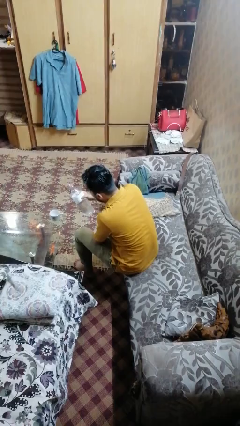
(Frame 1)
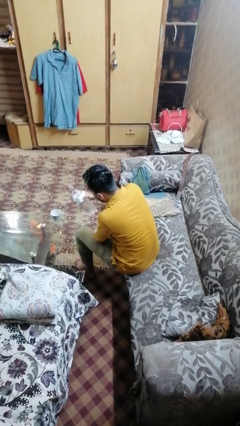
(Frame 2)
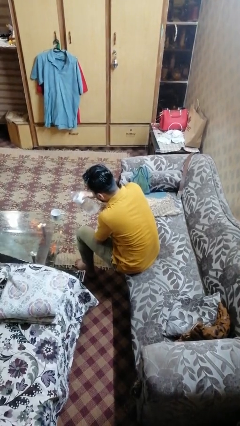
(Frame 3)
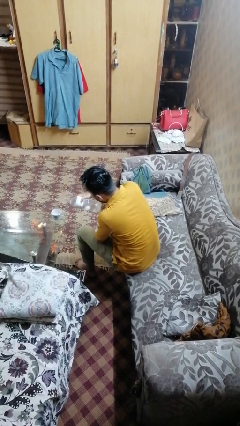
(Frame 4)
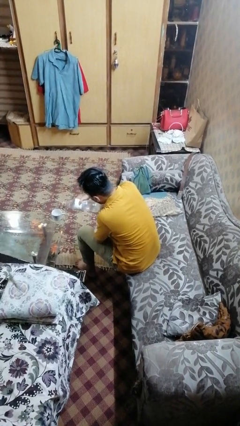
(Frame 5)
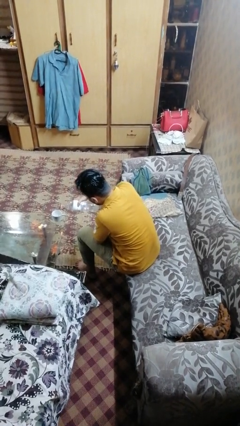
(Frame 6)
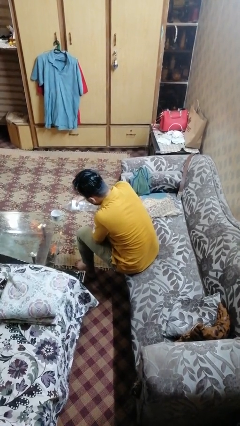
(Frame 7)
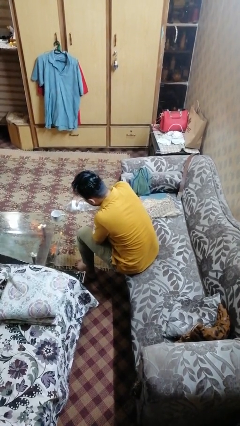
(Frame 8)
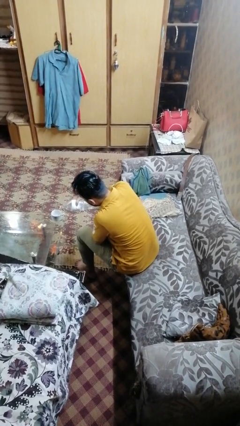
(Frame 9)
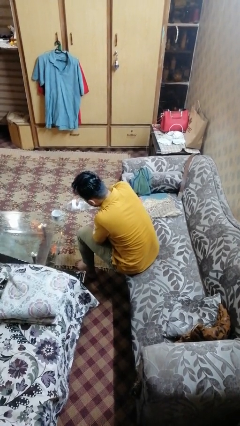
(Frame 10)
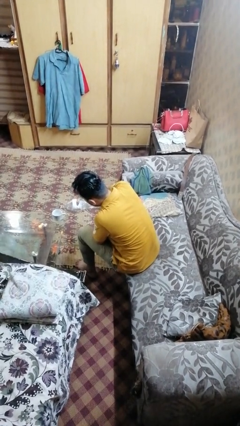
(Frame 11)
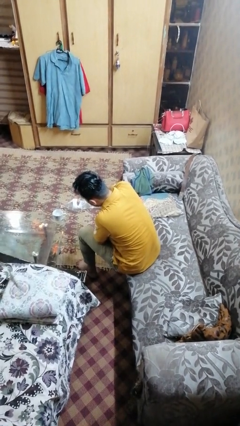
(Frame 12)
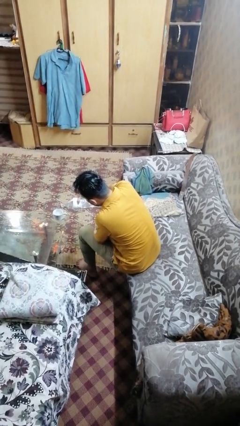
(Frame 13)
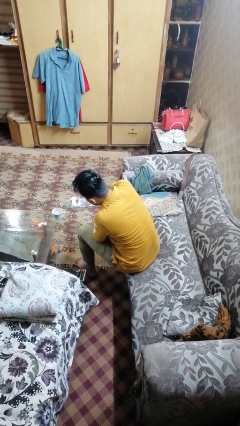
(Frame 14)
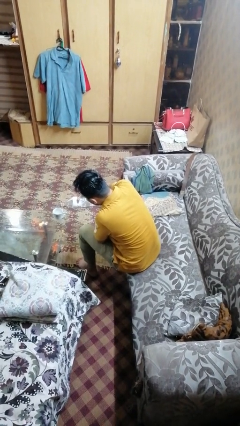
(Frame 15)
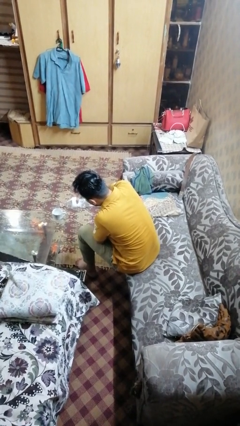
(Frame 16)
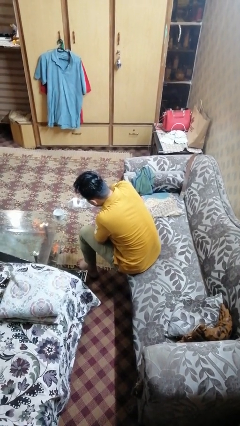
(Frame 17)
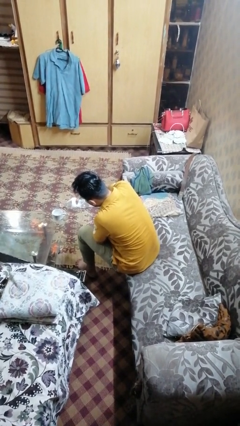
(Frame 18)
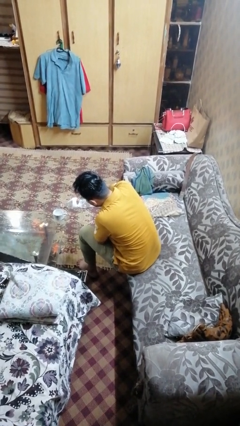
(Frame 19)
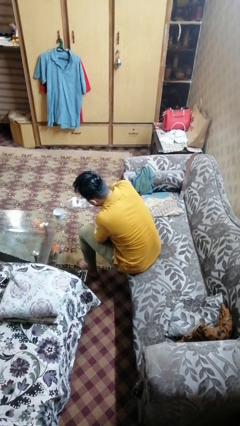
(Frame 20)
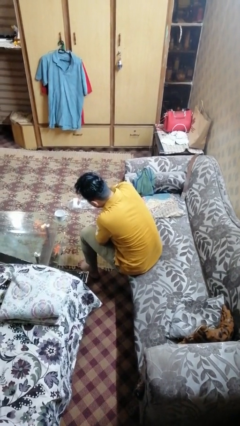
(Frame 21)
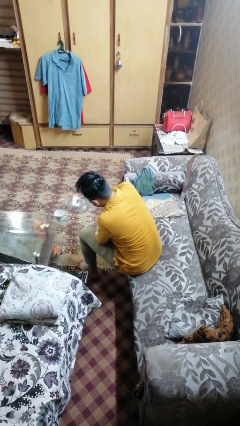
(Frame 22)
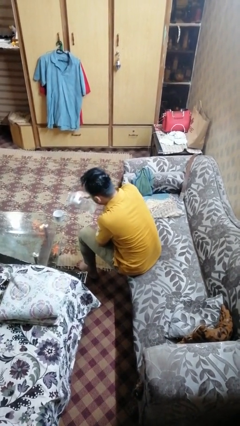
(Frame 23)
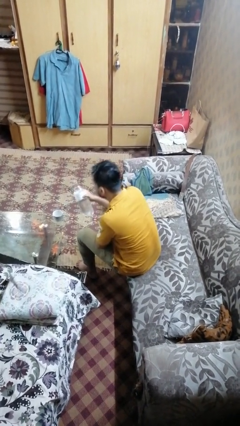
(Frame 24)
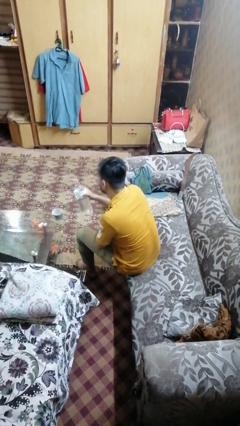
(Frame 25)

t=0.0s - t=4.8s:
person pours liquid into cup

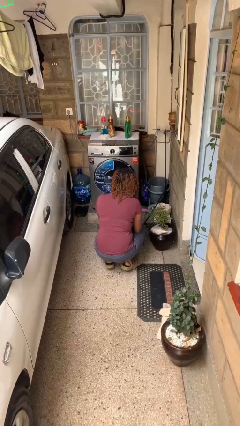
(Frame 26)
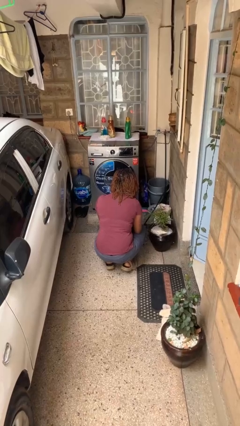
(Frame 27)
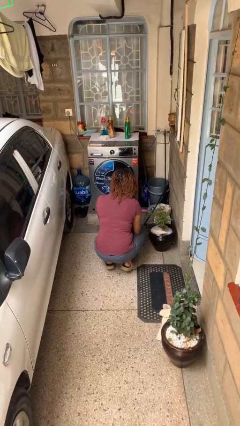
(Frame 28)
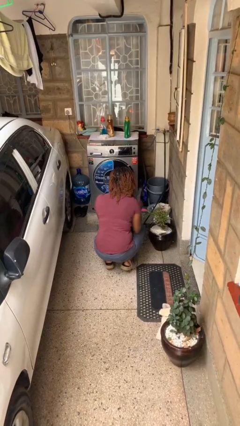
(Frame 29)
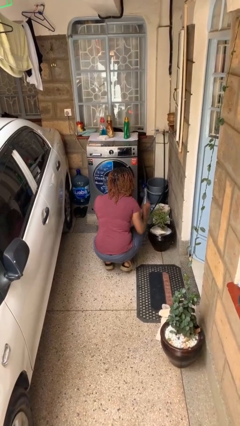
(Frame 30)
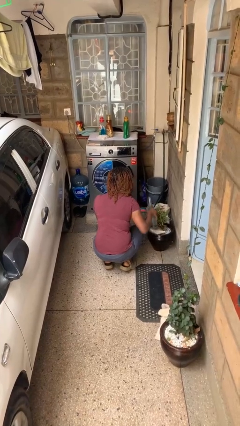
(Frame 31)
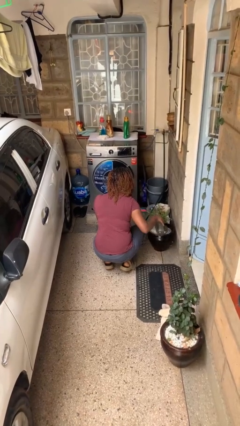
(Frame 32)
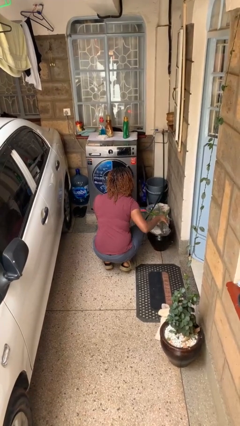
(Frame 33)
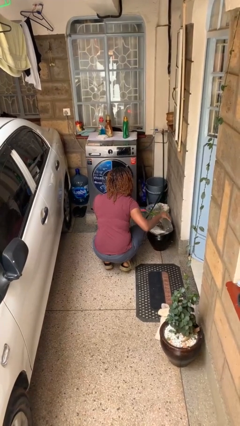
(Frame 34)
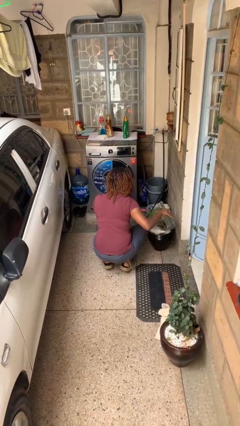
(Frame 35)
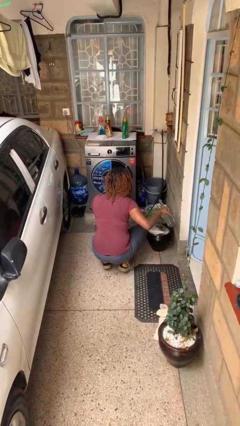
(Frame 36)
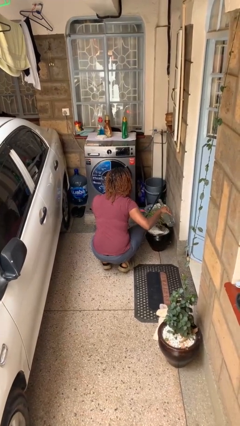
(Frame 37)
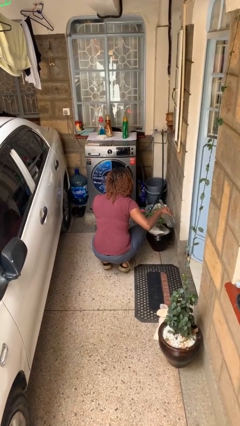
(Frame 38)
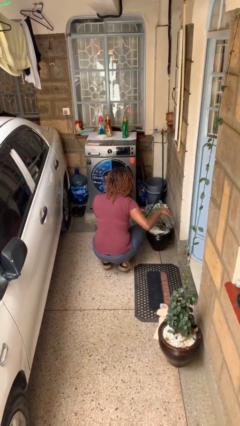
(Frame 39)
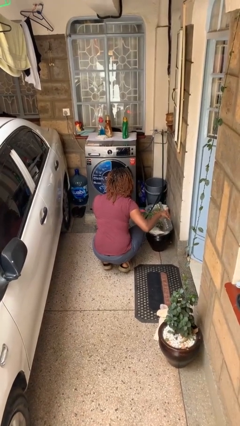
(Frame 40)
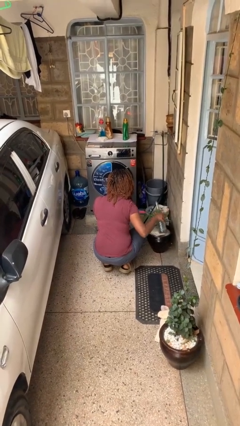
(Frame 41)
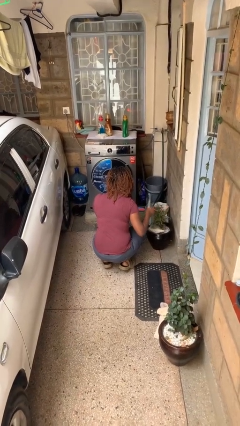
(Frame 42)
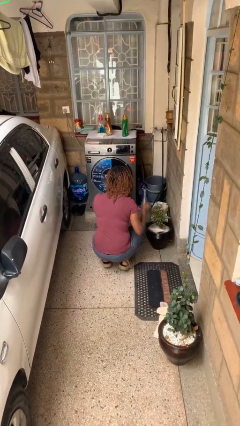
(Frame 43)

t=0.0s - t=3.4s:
person waters houseplant

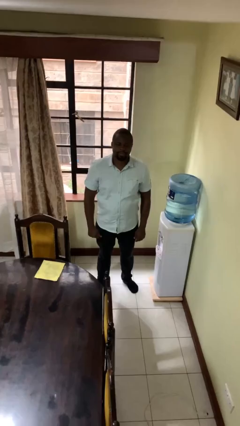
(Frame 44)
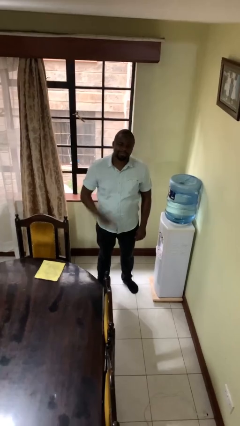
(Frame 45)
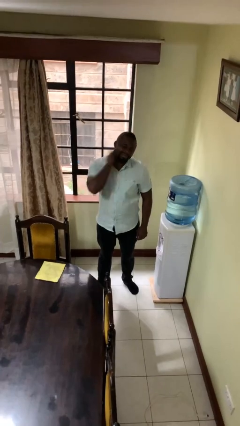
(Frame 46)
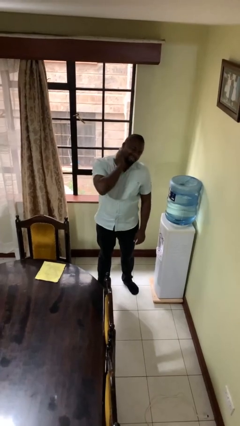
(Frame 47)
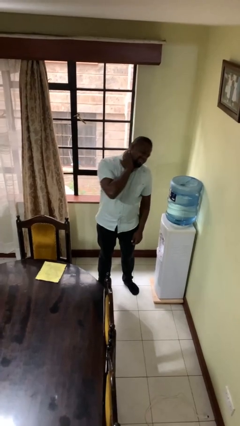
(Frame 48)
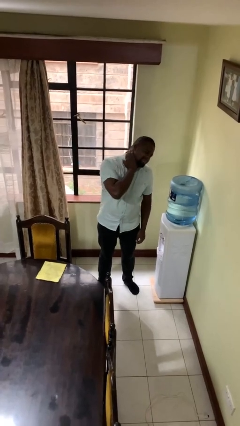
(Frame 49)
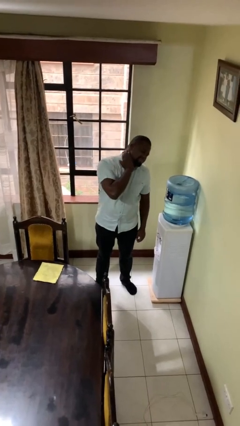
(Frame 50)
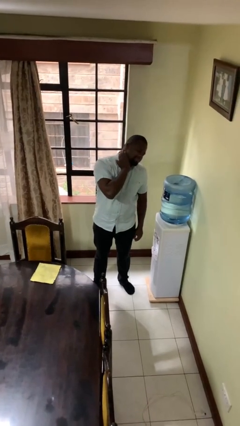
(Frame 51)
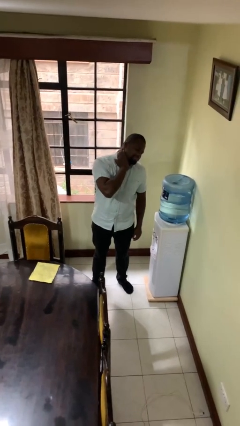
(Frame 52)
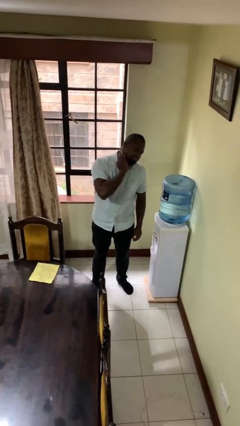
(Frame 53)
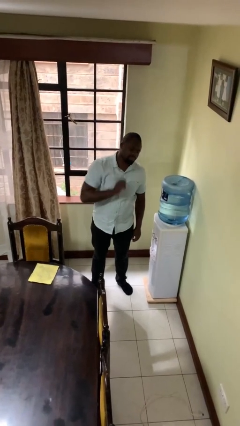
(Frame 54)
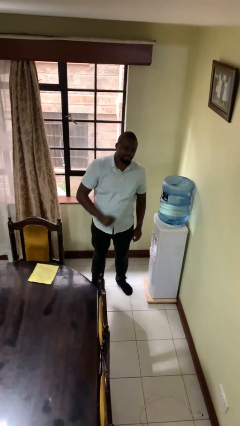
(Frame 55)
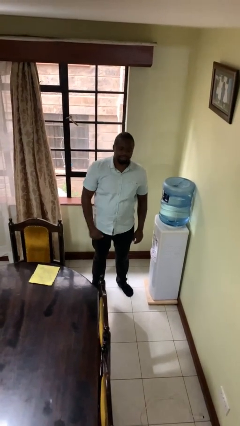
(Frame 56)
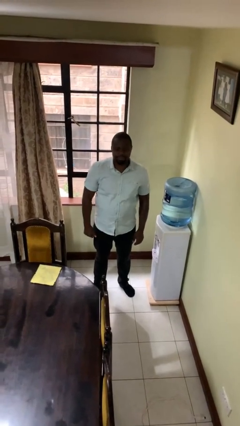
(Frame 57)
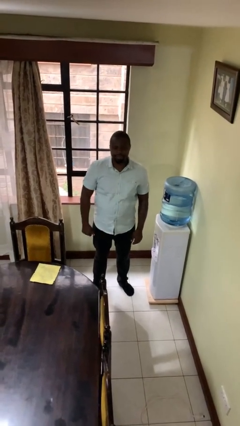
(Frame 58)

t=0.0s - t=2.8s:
person swats bug

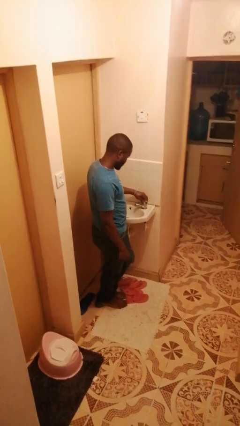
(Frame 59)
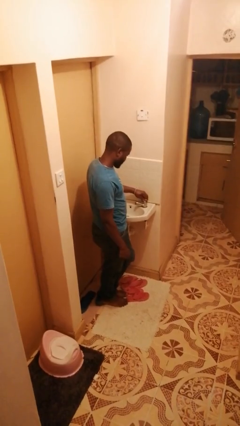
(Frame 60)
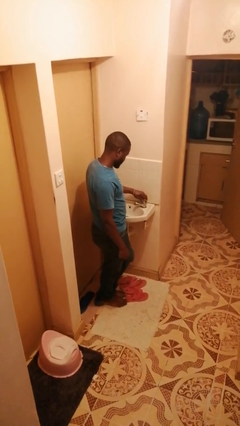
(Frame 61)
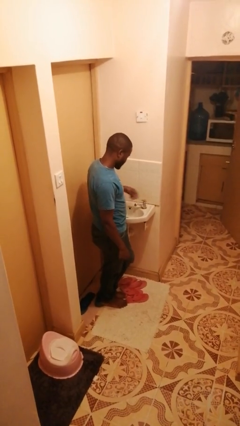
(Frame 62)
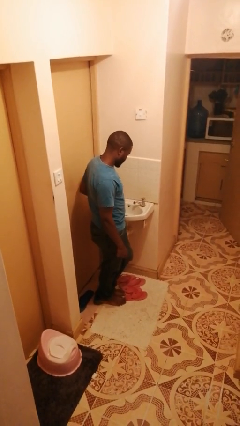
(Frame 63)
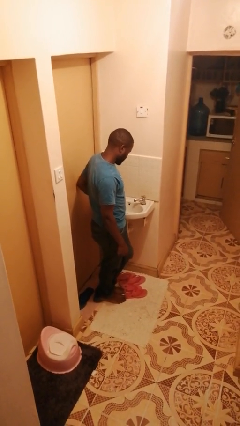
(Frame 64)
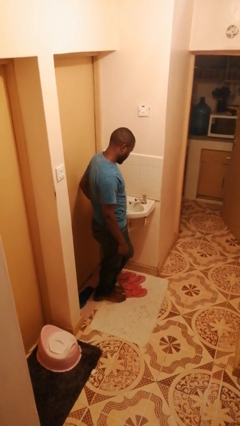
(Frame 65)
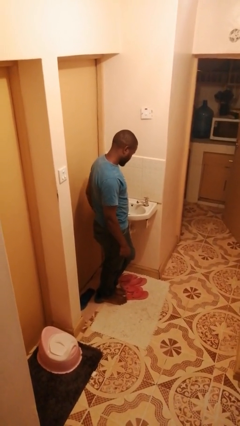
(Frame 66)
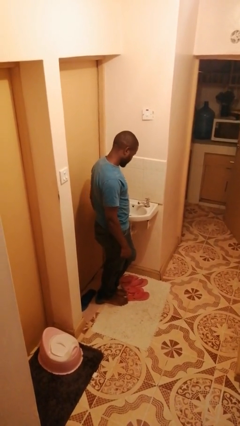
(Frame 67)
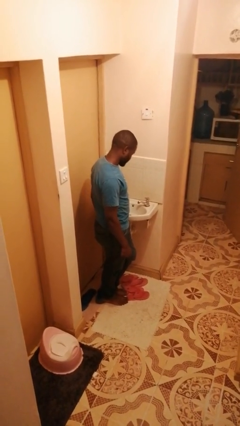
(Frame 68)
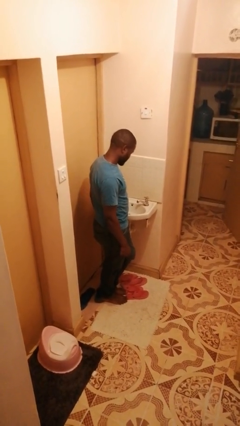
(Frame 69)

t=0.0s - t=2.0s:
person turns off faucet

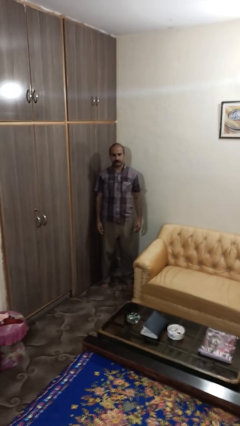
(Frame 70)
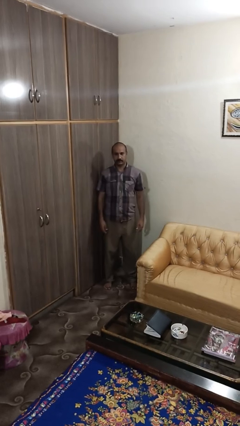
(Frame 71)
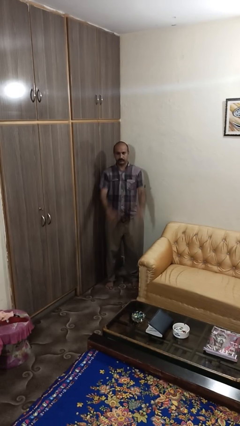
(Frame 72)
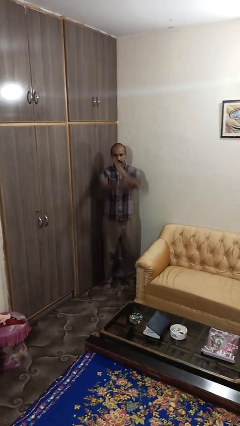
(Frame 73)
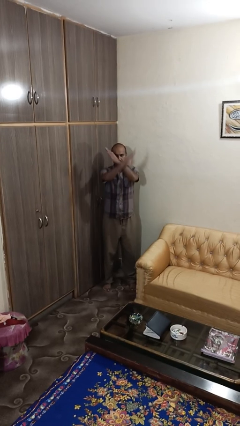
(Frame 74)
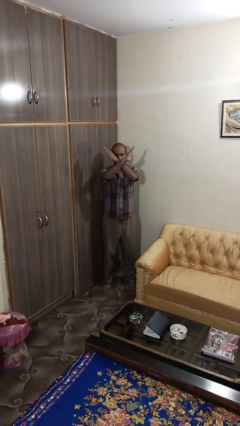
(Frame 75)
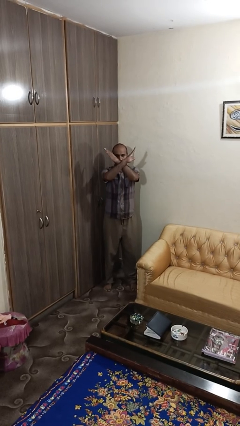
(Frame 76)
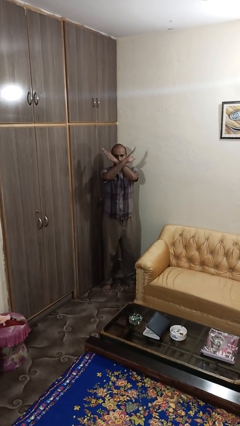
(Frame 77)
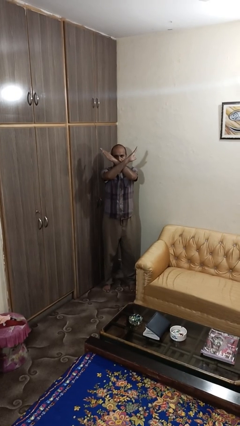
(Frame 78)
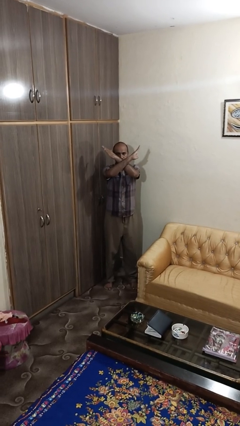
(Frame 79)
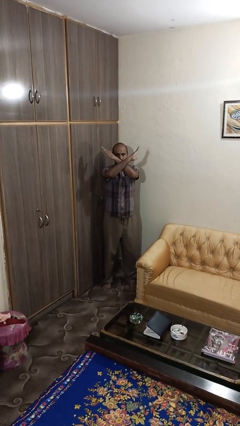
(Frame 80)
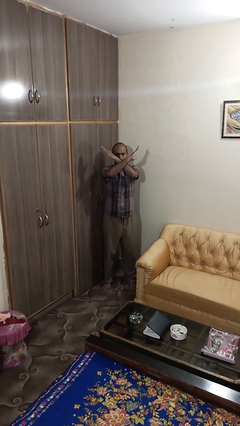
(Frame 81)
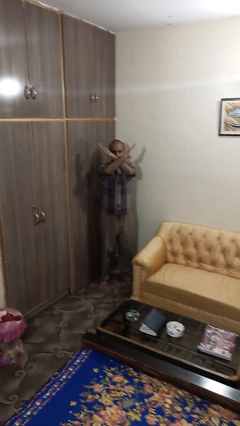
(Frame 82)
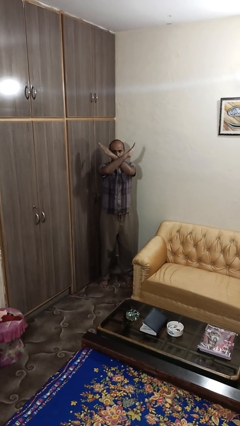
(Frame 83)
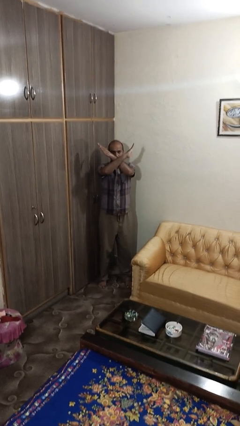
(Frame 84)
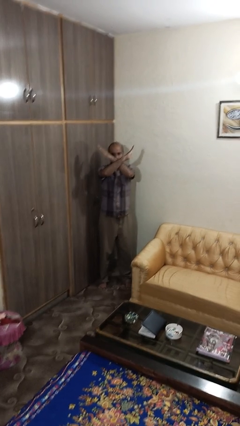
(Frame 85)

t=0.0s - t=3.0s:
person gestures arms x

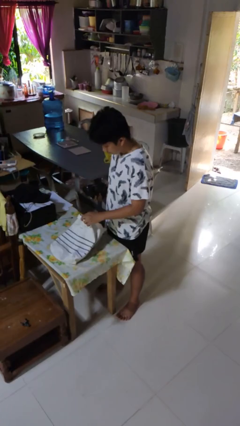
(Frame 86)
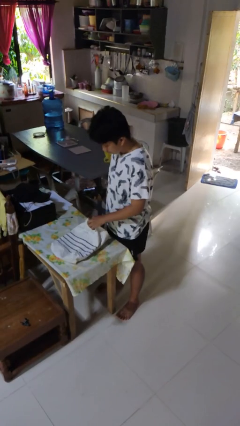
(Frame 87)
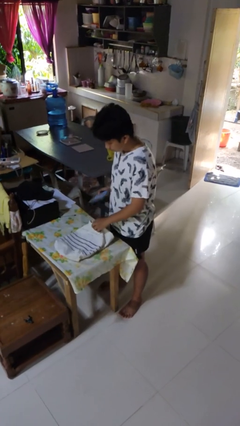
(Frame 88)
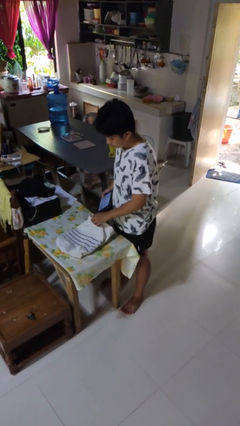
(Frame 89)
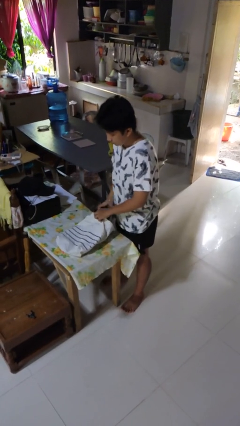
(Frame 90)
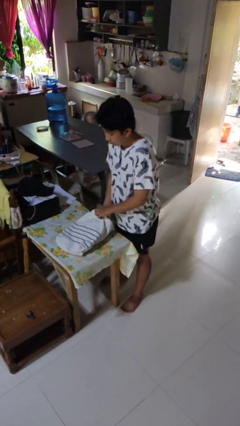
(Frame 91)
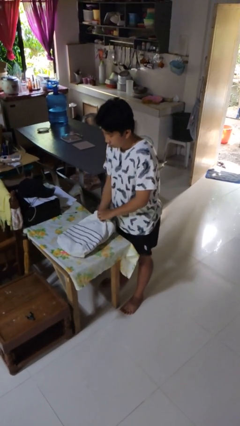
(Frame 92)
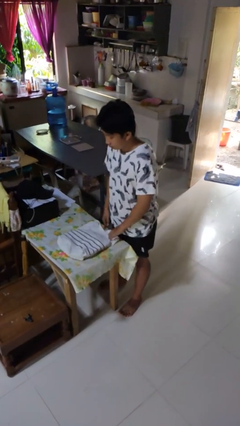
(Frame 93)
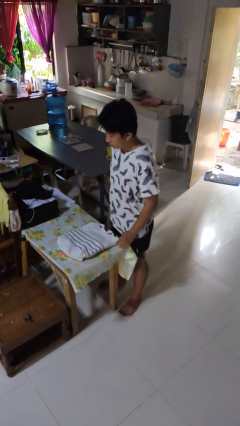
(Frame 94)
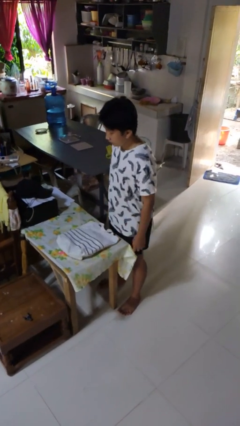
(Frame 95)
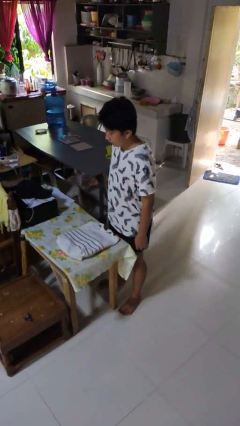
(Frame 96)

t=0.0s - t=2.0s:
person puts object into bag
